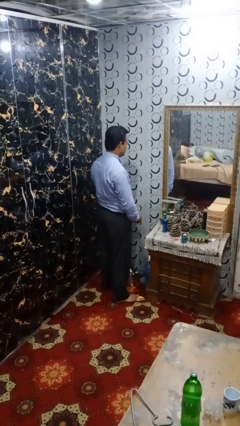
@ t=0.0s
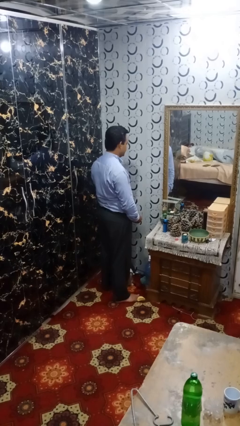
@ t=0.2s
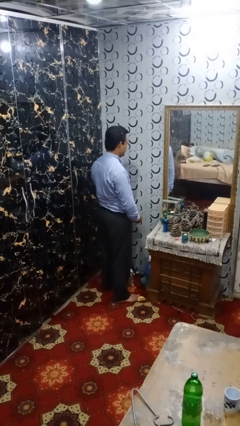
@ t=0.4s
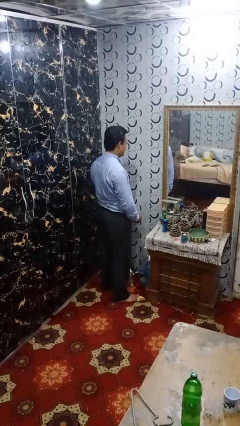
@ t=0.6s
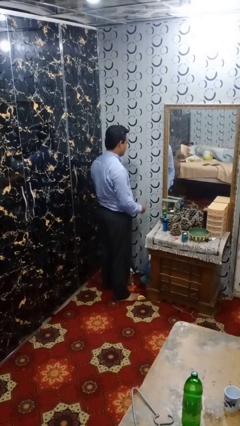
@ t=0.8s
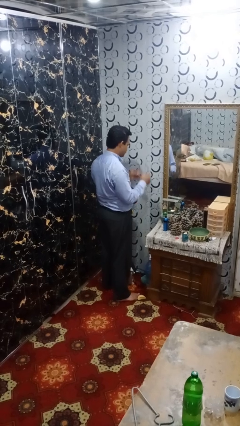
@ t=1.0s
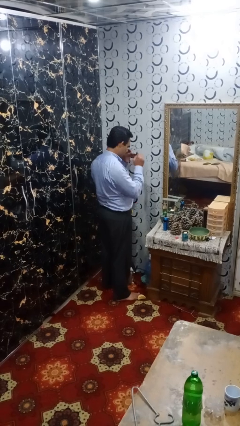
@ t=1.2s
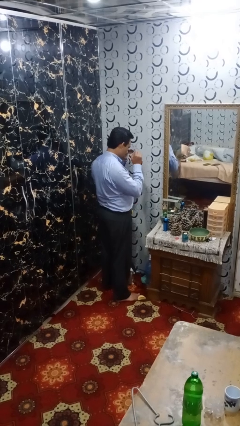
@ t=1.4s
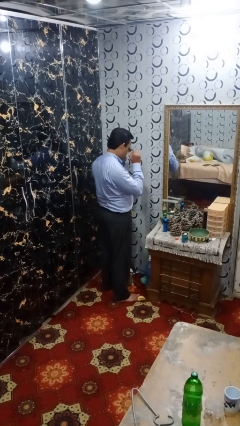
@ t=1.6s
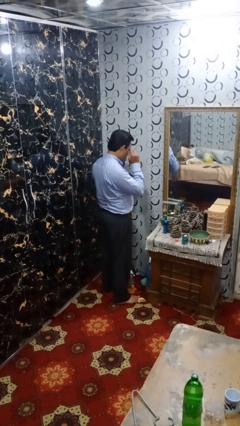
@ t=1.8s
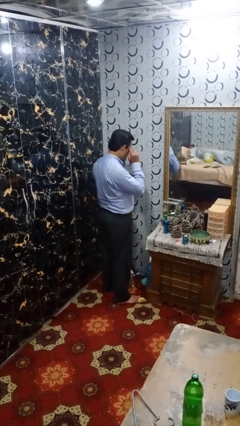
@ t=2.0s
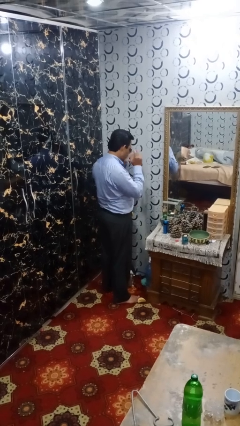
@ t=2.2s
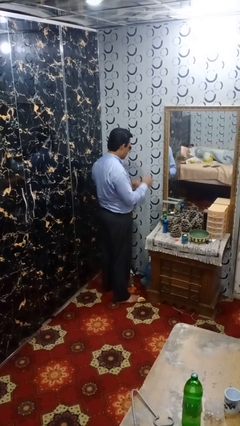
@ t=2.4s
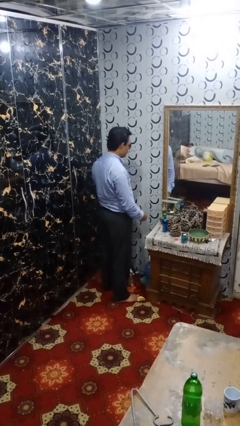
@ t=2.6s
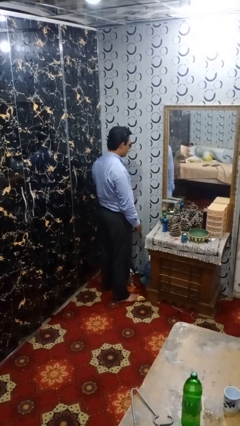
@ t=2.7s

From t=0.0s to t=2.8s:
person puts on sunglasses

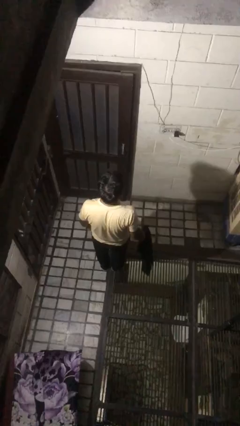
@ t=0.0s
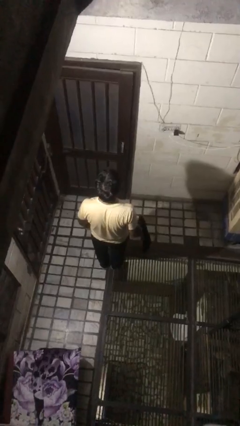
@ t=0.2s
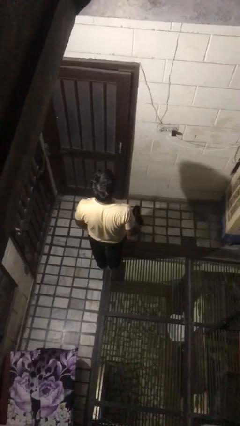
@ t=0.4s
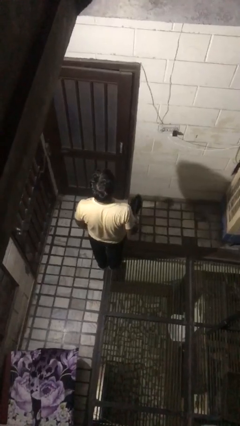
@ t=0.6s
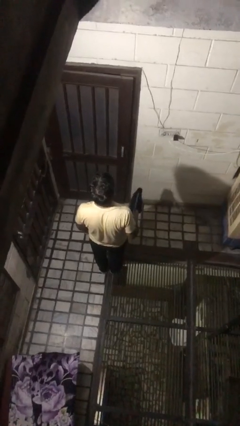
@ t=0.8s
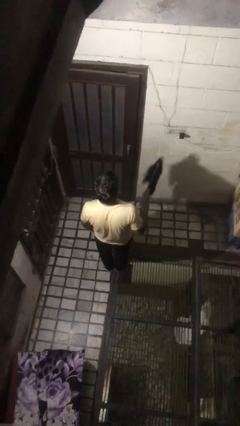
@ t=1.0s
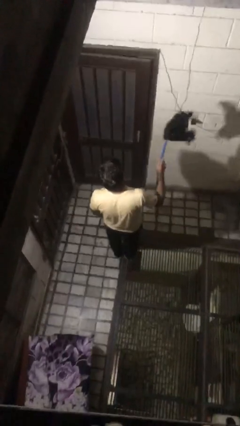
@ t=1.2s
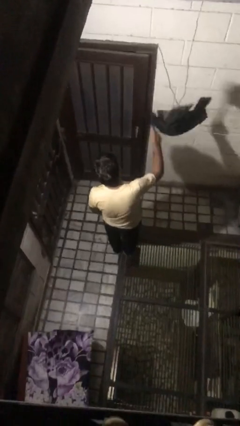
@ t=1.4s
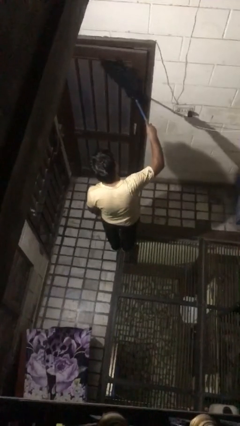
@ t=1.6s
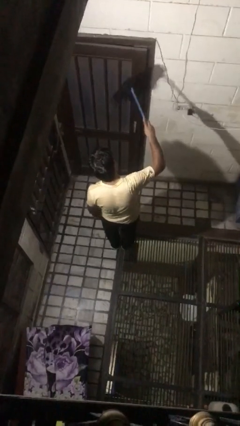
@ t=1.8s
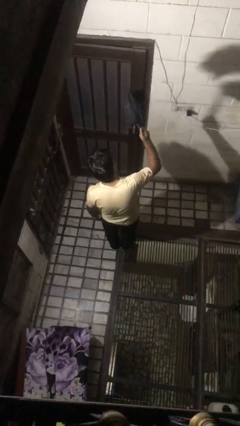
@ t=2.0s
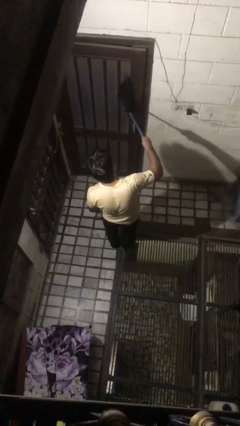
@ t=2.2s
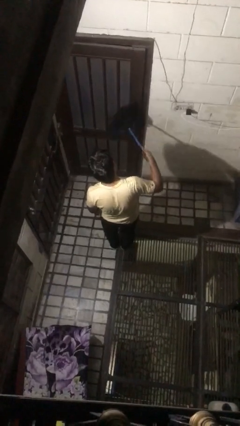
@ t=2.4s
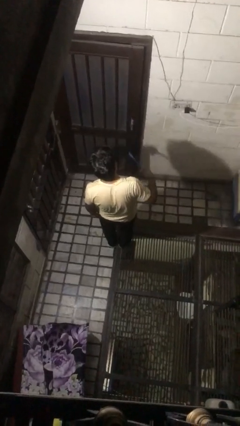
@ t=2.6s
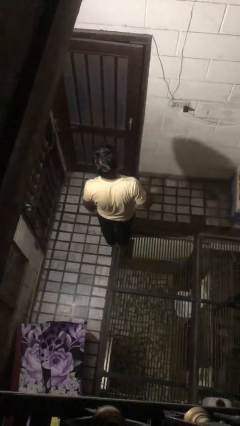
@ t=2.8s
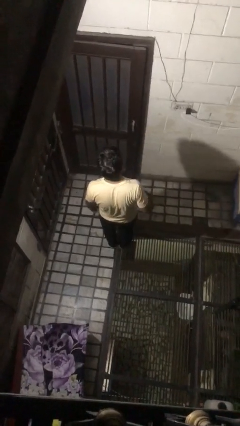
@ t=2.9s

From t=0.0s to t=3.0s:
person dusts furniture

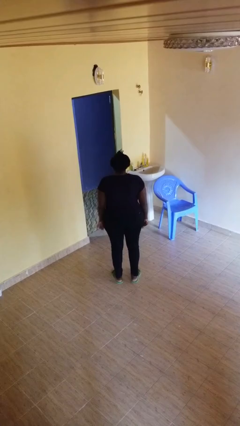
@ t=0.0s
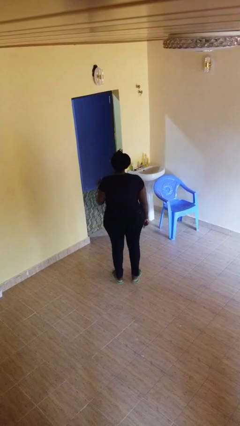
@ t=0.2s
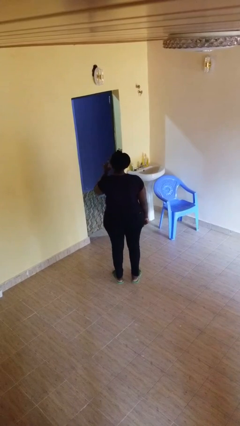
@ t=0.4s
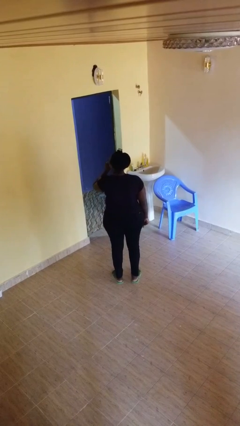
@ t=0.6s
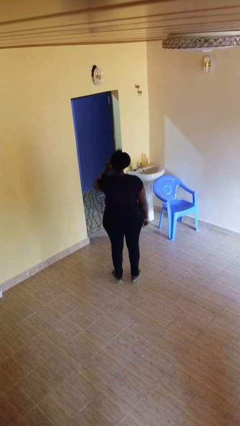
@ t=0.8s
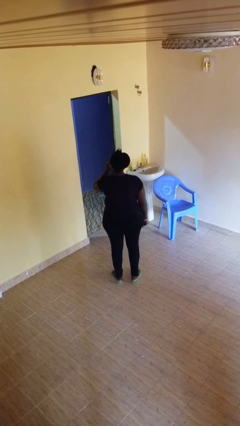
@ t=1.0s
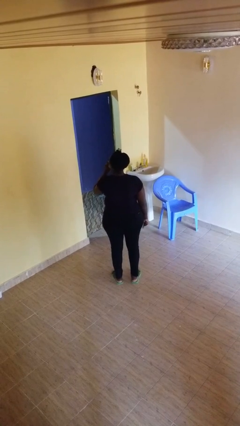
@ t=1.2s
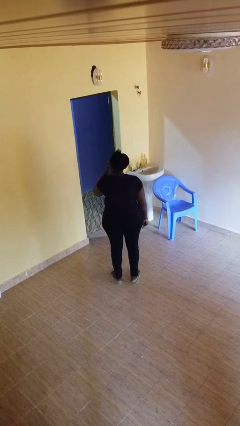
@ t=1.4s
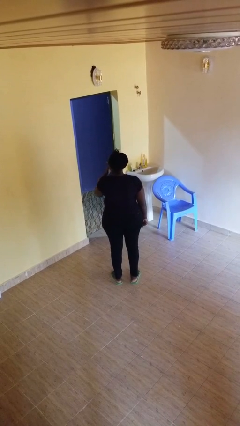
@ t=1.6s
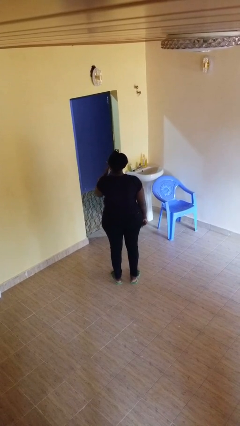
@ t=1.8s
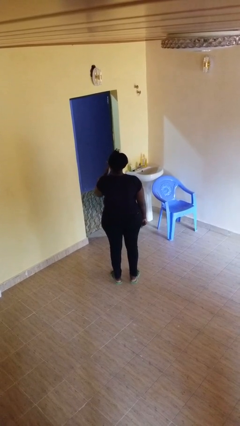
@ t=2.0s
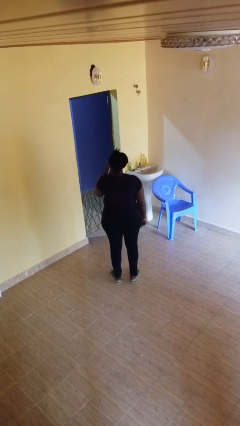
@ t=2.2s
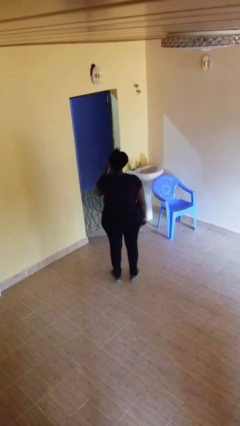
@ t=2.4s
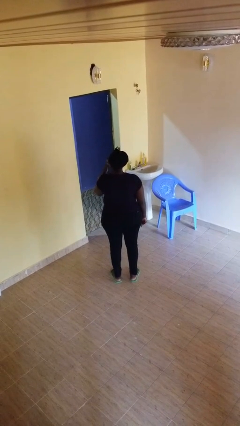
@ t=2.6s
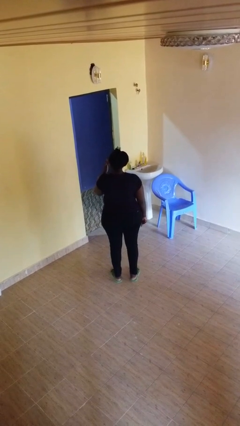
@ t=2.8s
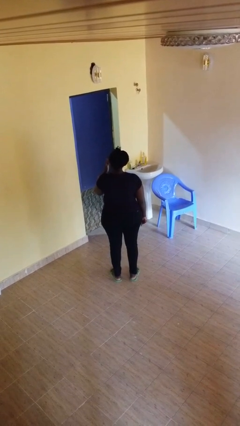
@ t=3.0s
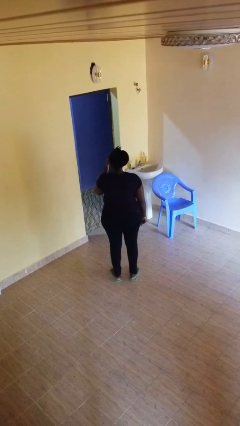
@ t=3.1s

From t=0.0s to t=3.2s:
person licks fingers

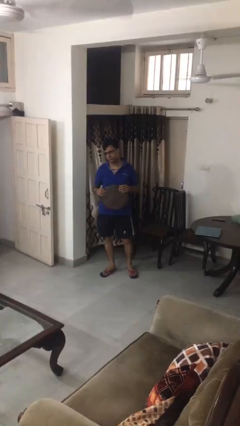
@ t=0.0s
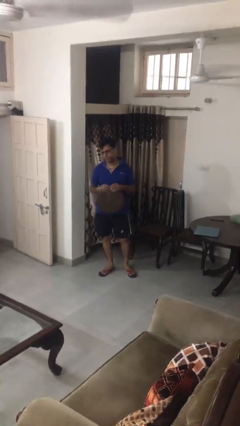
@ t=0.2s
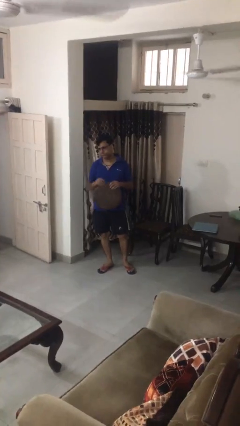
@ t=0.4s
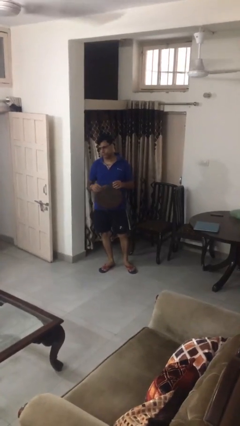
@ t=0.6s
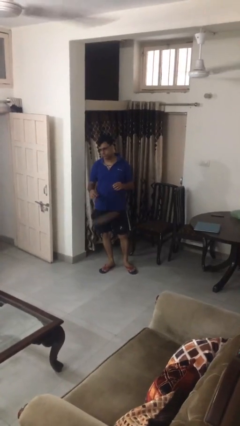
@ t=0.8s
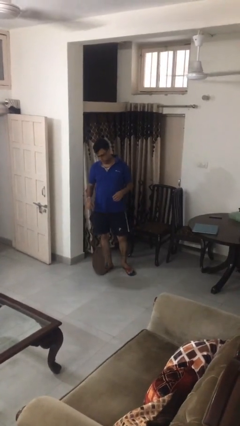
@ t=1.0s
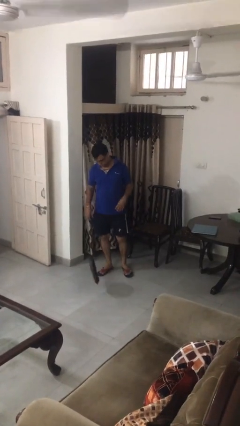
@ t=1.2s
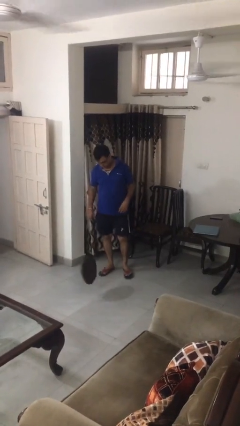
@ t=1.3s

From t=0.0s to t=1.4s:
person drops object

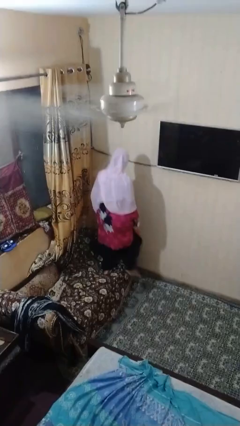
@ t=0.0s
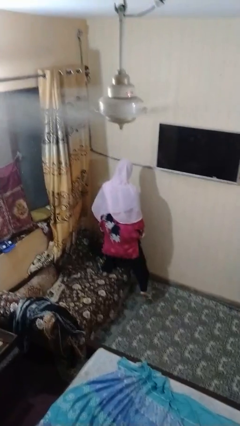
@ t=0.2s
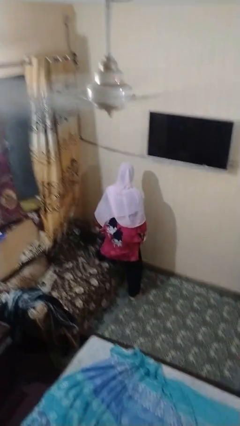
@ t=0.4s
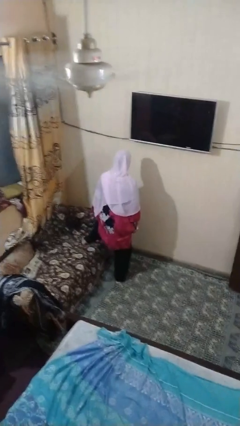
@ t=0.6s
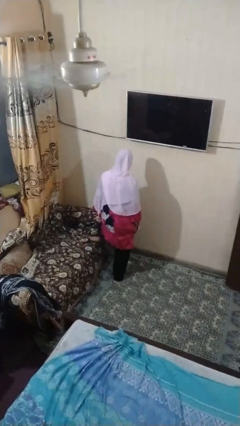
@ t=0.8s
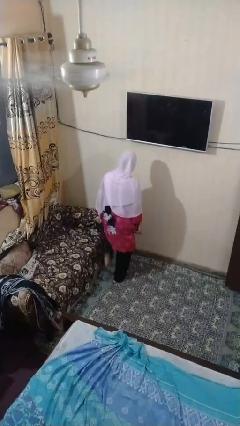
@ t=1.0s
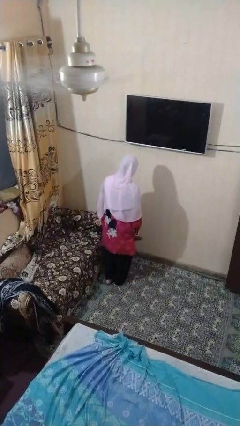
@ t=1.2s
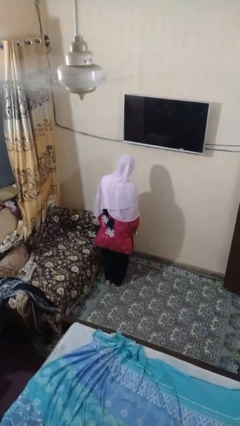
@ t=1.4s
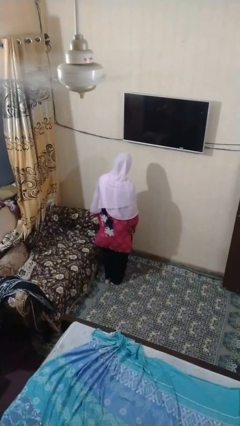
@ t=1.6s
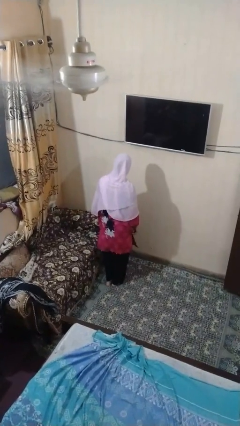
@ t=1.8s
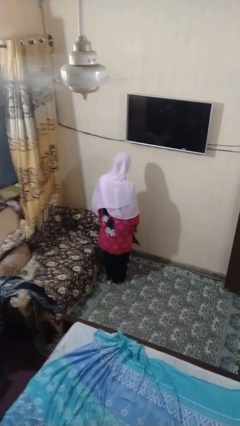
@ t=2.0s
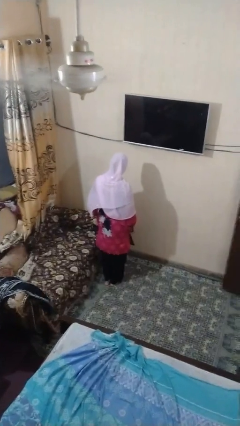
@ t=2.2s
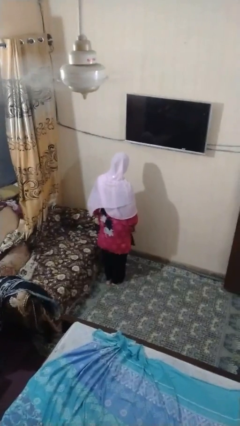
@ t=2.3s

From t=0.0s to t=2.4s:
person climbs off couch

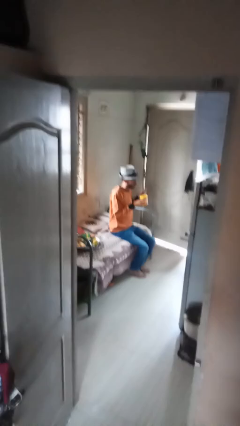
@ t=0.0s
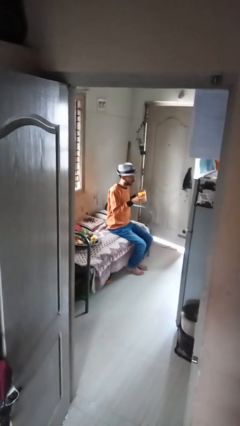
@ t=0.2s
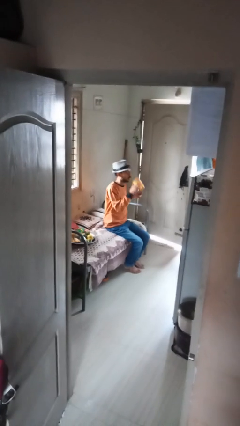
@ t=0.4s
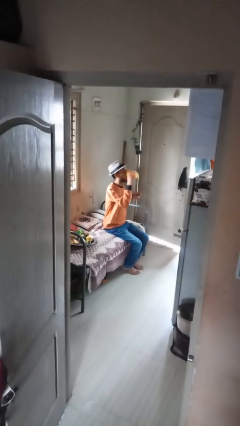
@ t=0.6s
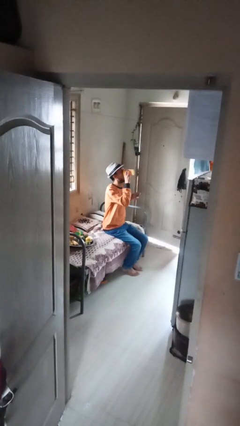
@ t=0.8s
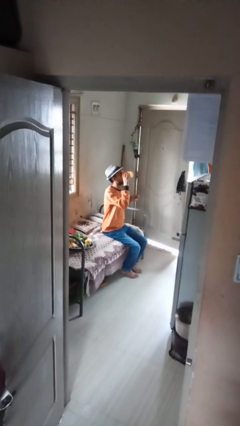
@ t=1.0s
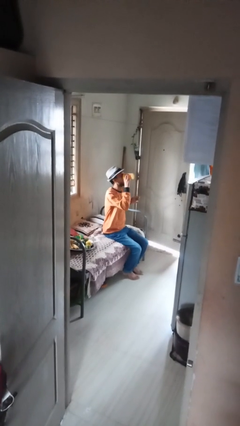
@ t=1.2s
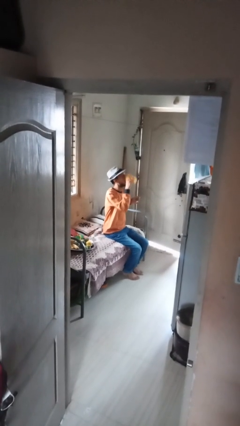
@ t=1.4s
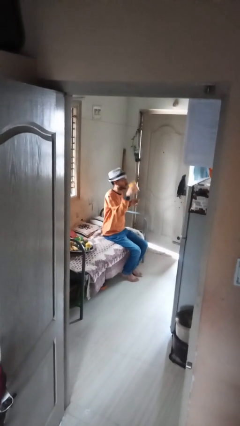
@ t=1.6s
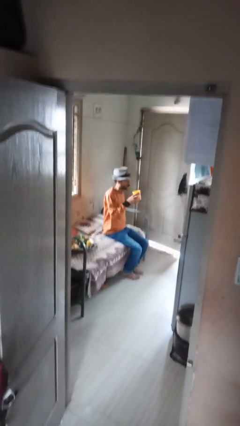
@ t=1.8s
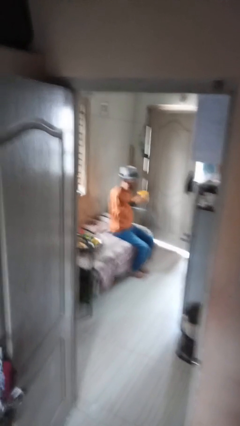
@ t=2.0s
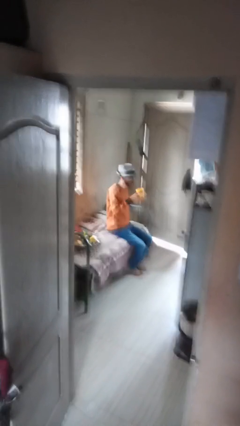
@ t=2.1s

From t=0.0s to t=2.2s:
person drinks from mug

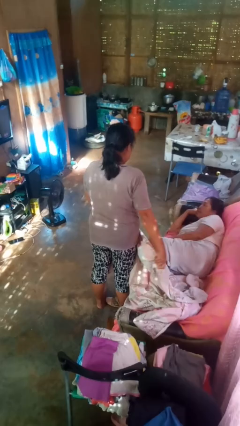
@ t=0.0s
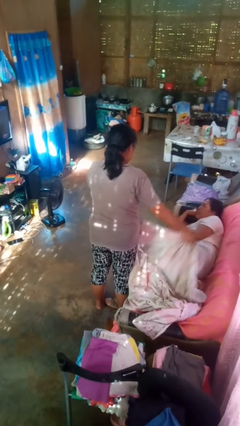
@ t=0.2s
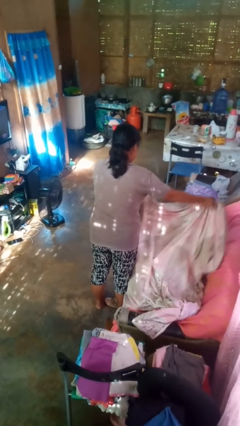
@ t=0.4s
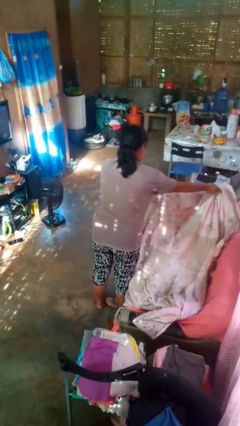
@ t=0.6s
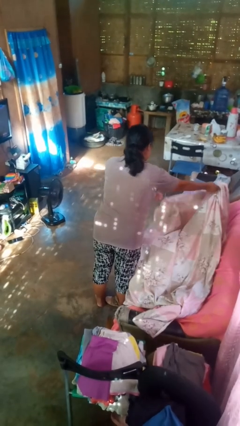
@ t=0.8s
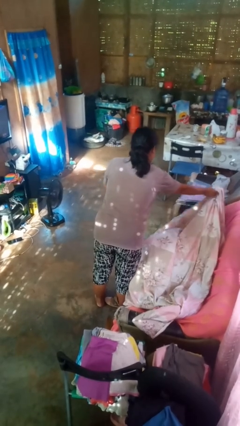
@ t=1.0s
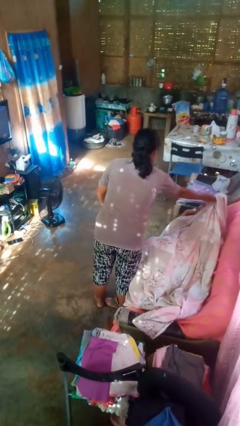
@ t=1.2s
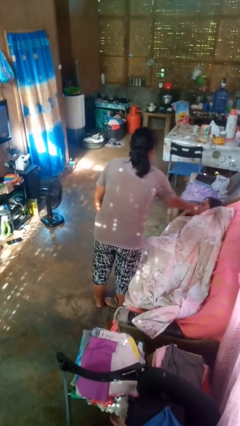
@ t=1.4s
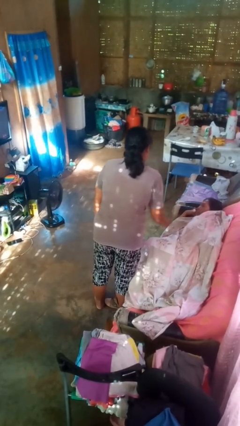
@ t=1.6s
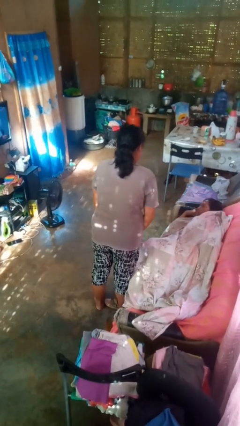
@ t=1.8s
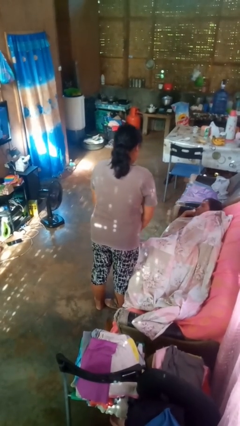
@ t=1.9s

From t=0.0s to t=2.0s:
person covers friend with blanket
